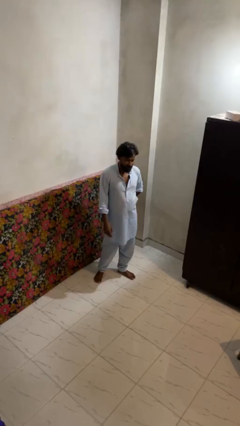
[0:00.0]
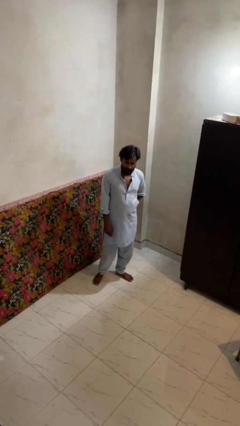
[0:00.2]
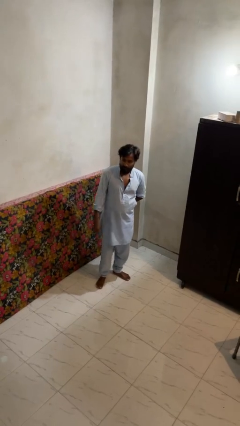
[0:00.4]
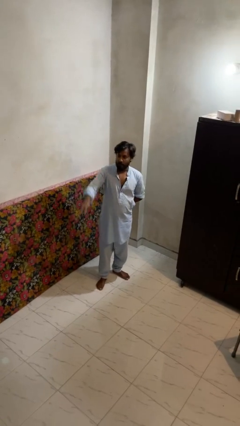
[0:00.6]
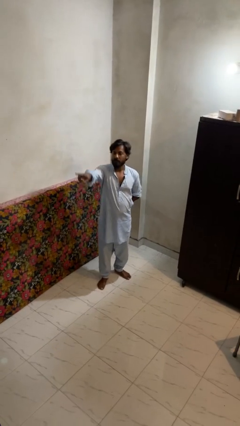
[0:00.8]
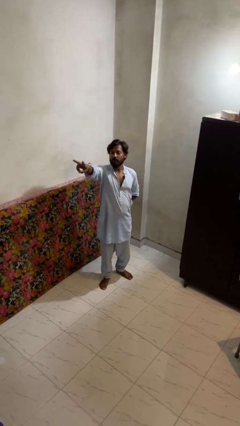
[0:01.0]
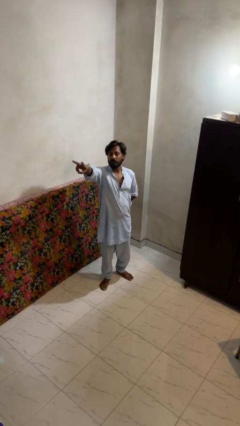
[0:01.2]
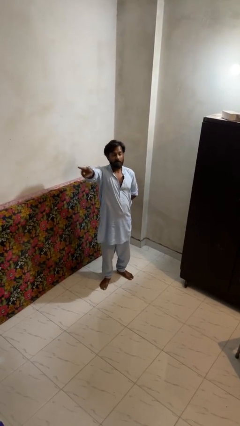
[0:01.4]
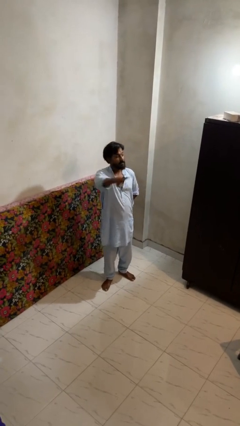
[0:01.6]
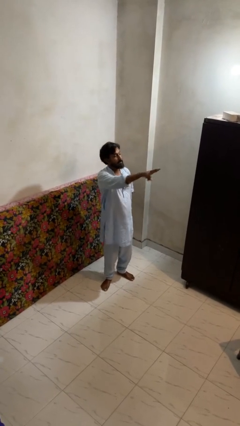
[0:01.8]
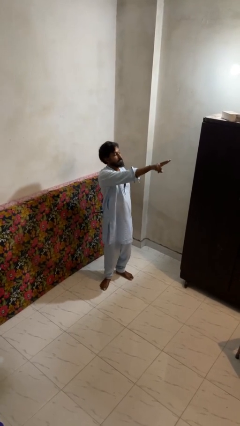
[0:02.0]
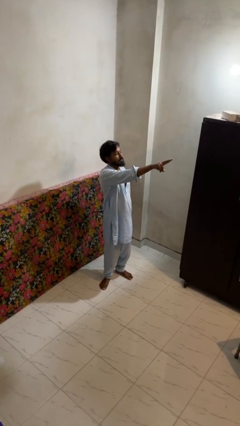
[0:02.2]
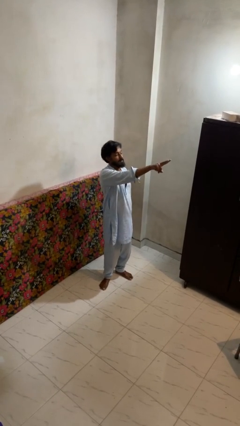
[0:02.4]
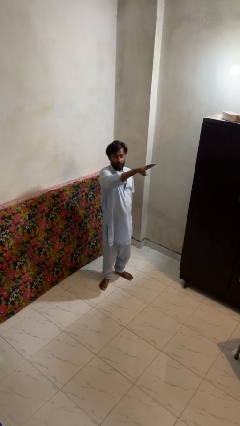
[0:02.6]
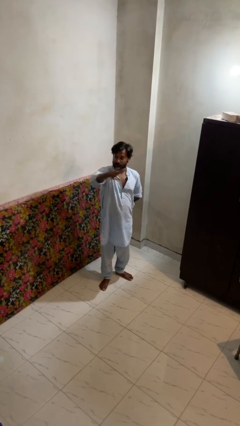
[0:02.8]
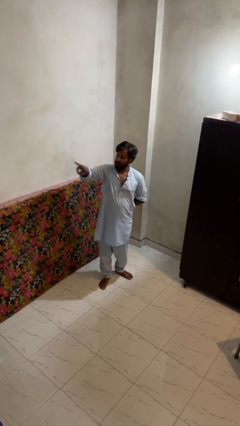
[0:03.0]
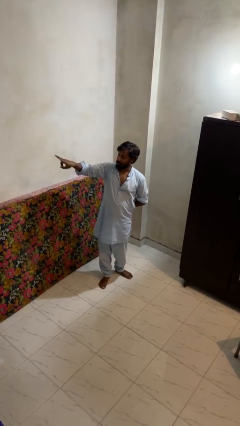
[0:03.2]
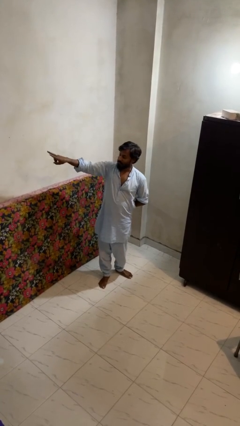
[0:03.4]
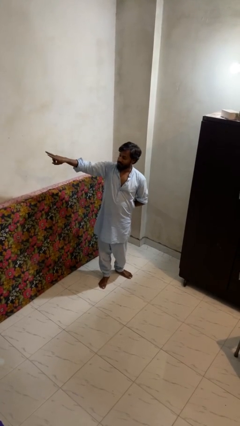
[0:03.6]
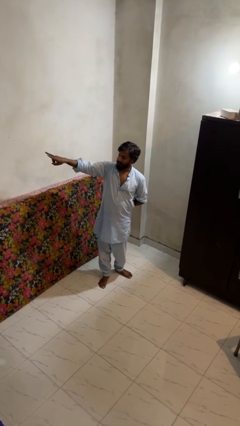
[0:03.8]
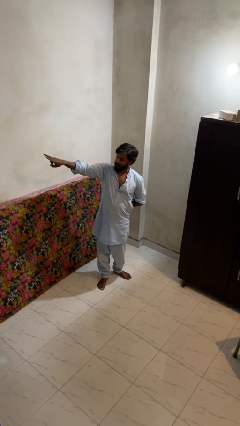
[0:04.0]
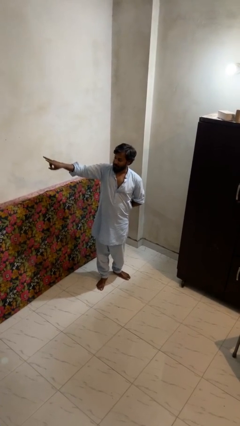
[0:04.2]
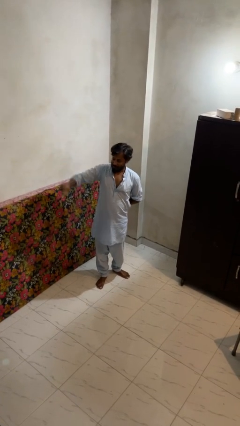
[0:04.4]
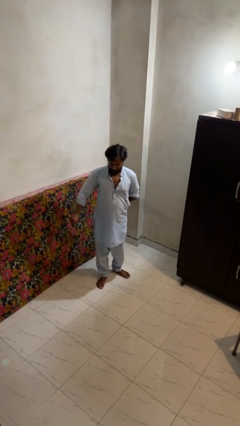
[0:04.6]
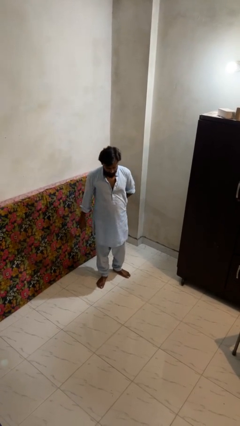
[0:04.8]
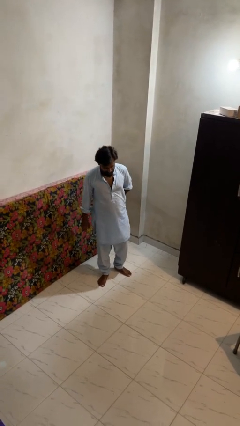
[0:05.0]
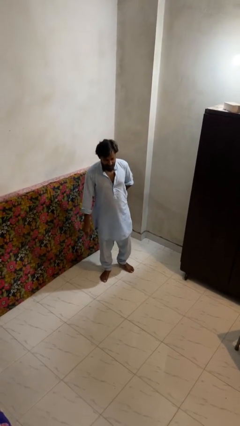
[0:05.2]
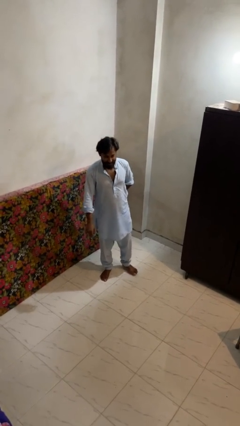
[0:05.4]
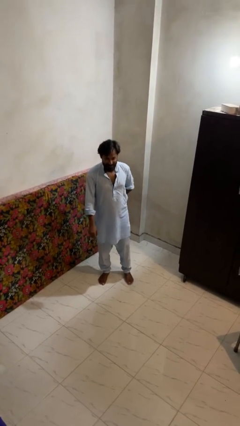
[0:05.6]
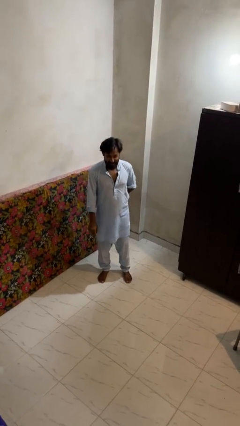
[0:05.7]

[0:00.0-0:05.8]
person gestures peace

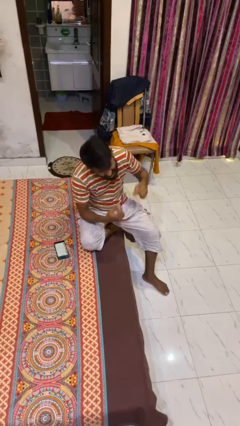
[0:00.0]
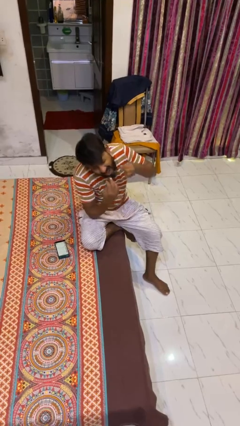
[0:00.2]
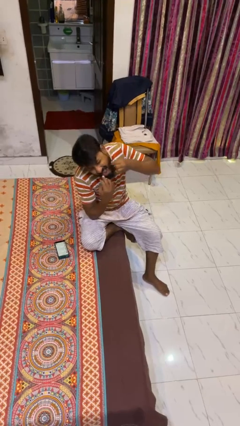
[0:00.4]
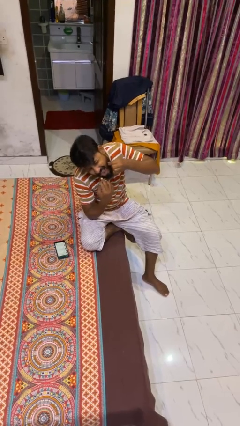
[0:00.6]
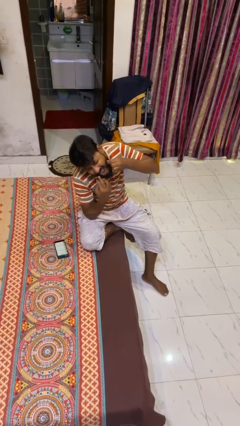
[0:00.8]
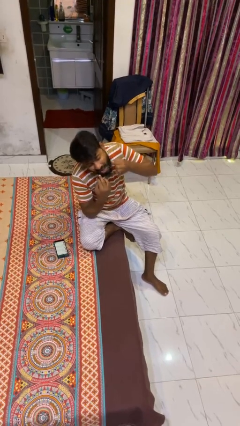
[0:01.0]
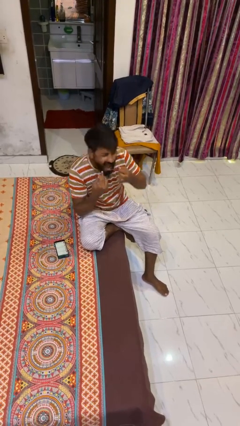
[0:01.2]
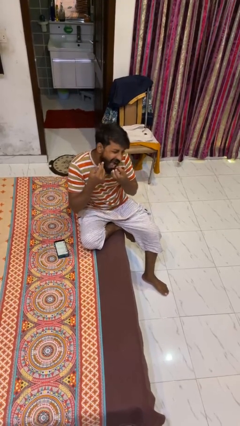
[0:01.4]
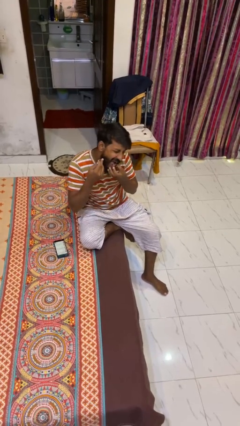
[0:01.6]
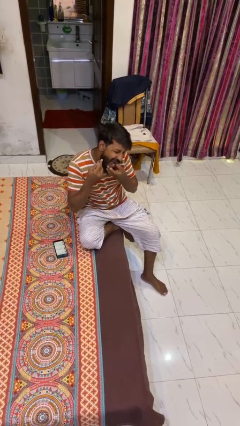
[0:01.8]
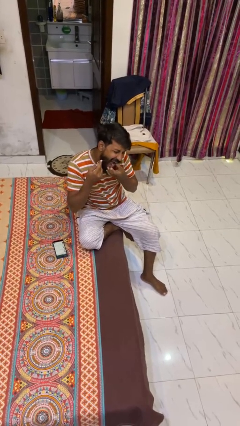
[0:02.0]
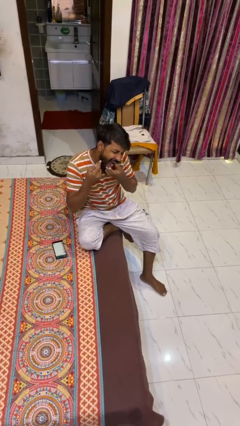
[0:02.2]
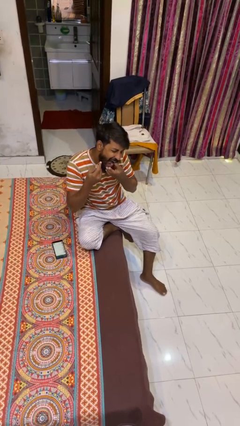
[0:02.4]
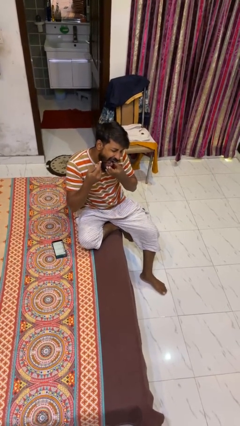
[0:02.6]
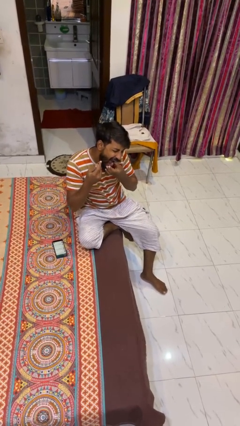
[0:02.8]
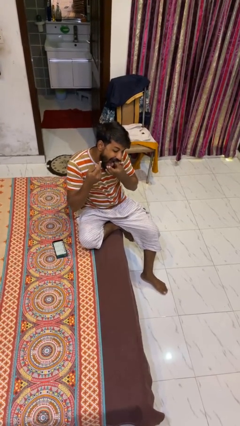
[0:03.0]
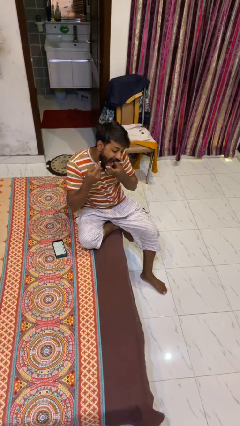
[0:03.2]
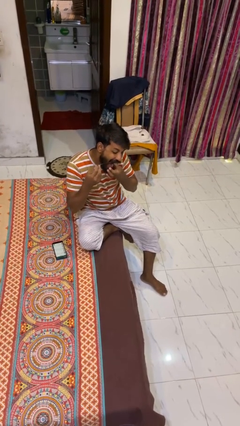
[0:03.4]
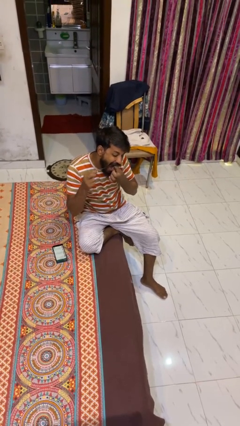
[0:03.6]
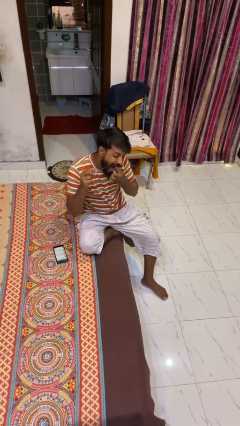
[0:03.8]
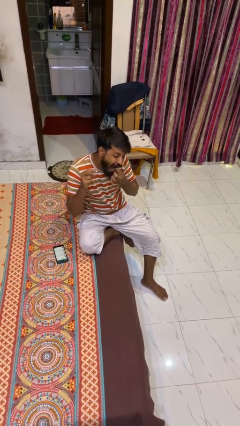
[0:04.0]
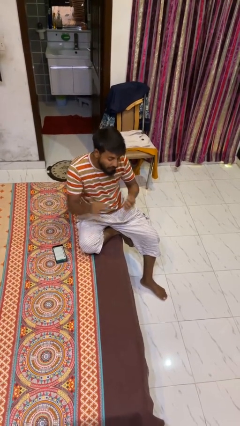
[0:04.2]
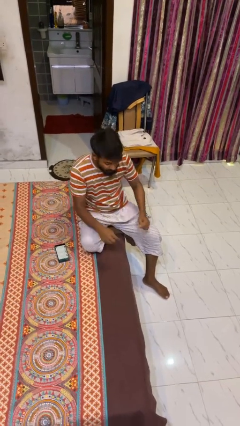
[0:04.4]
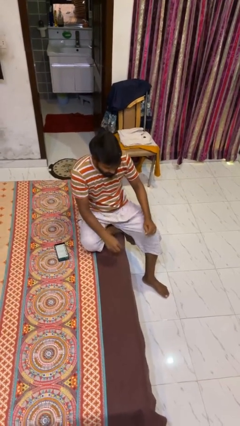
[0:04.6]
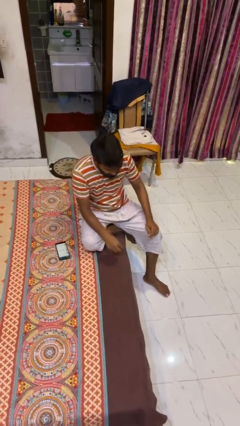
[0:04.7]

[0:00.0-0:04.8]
person flosses

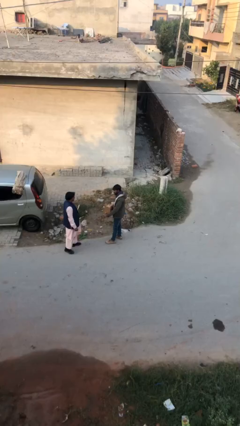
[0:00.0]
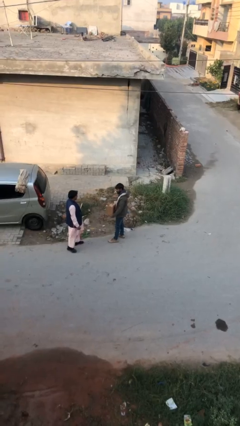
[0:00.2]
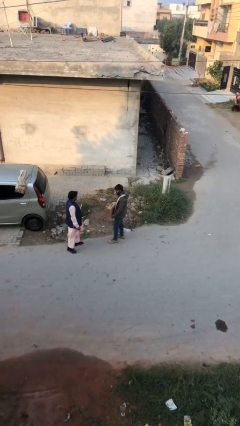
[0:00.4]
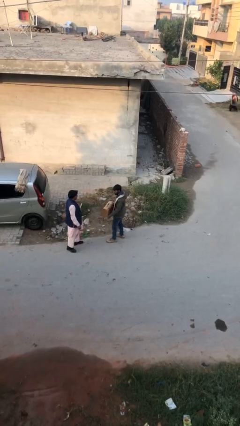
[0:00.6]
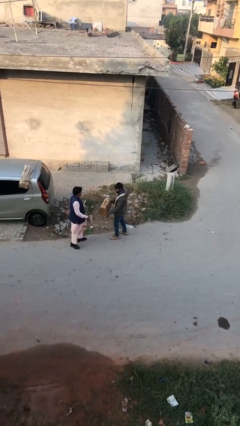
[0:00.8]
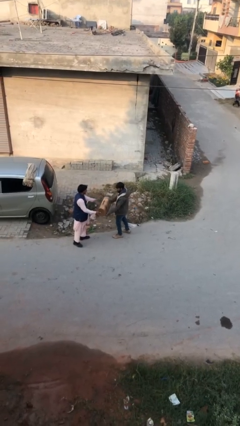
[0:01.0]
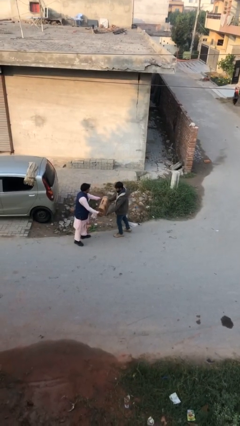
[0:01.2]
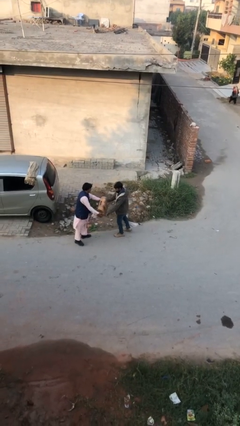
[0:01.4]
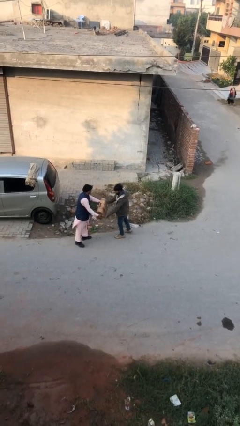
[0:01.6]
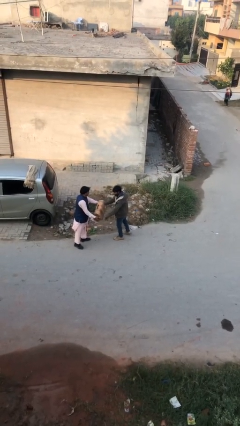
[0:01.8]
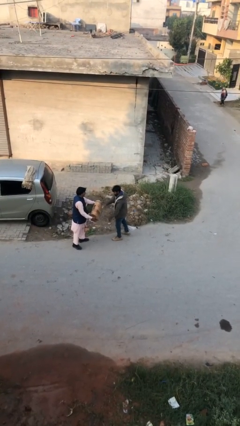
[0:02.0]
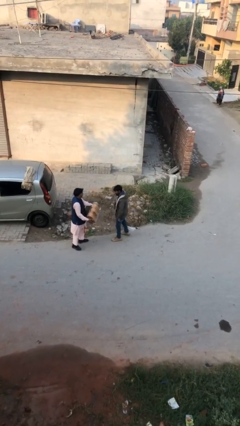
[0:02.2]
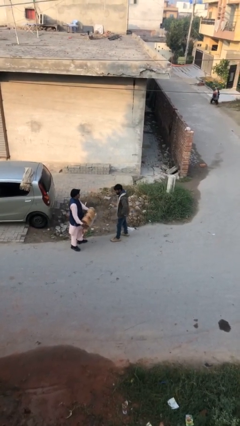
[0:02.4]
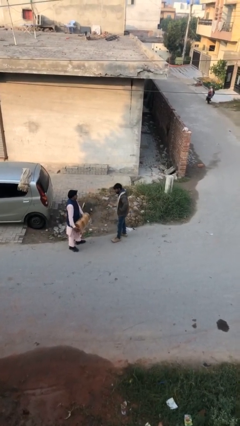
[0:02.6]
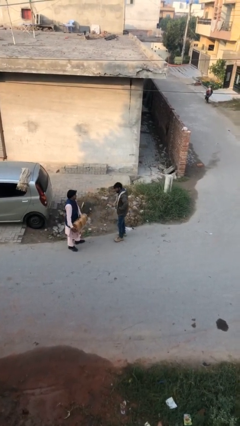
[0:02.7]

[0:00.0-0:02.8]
person transfers object to person

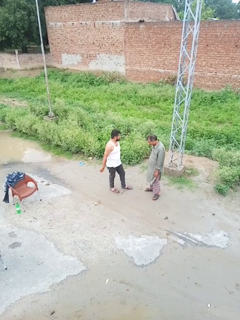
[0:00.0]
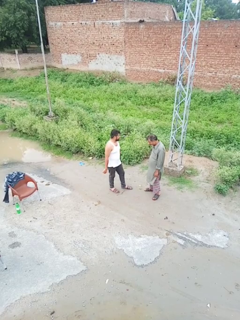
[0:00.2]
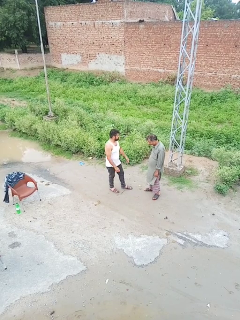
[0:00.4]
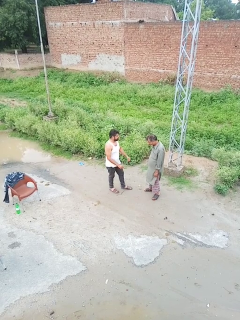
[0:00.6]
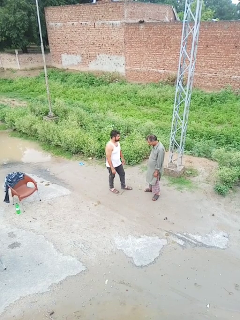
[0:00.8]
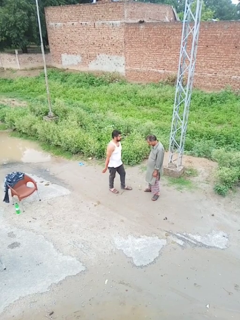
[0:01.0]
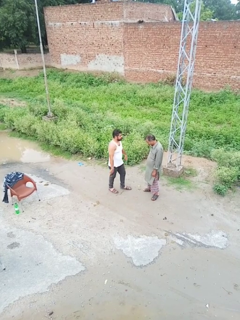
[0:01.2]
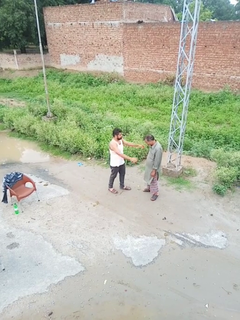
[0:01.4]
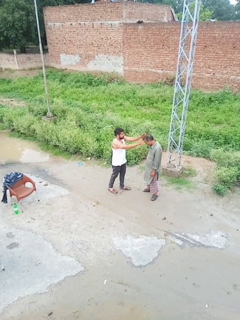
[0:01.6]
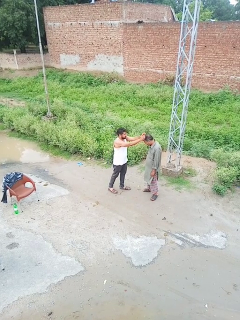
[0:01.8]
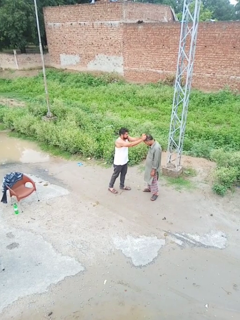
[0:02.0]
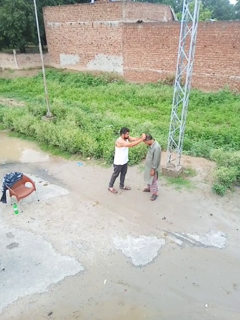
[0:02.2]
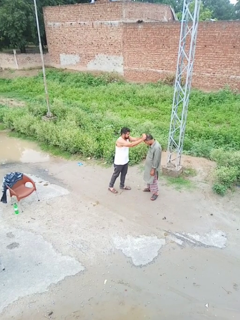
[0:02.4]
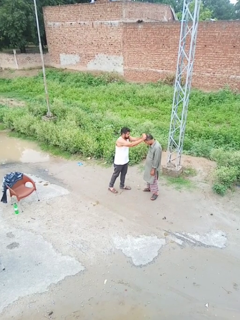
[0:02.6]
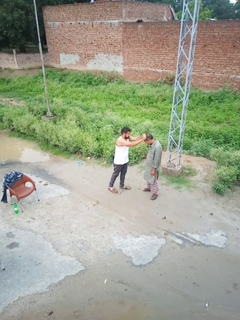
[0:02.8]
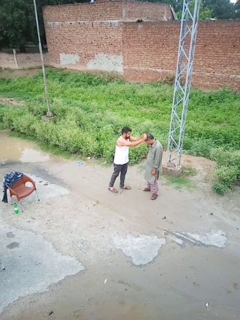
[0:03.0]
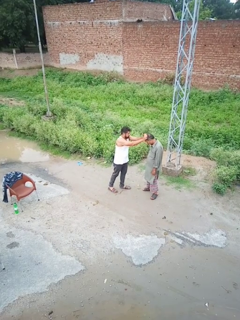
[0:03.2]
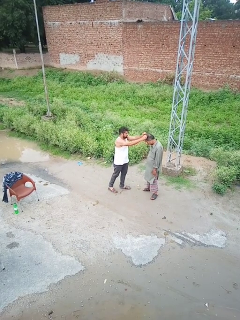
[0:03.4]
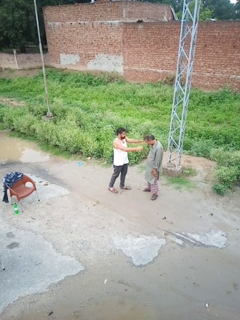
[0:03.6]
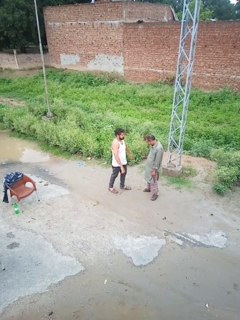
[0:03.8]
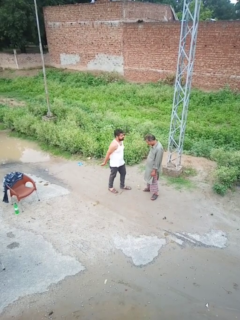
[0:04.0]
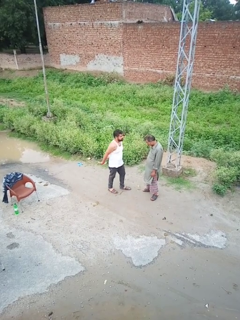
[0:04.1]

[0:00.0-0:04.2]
person grabs person by hair

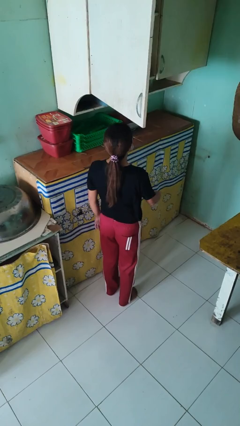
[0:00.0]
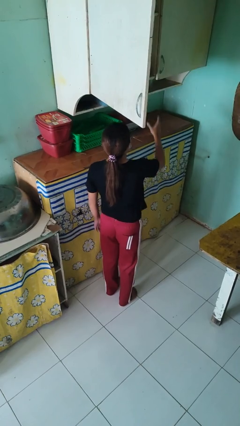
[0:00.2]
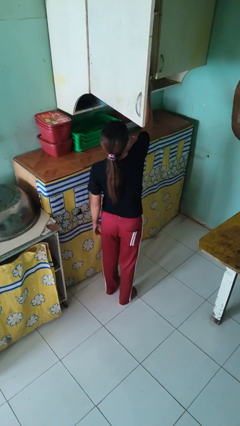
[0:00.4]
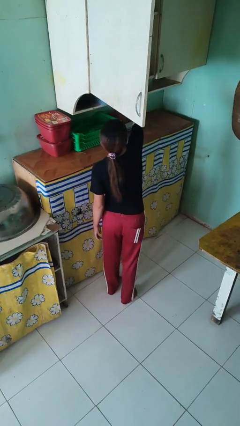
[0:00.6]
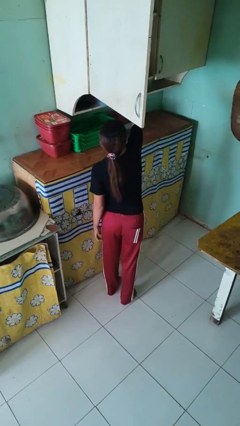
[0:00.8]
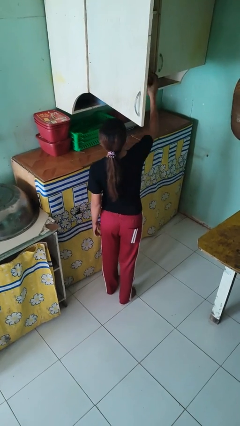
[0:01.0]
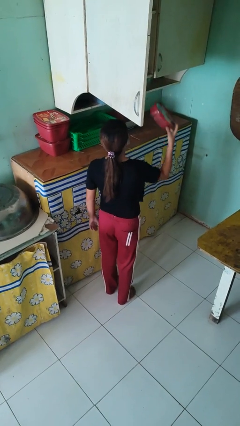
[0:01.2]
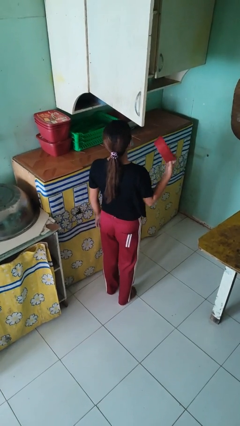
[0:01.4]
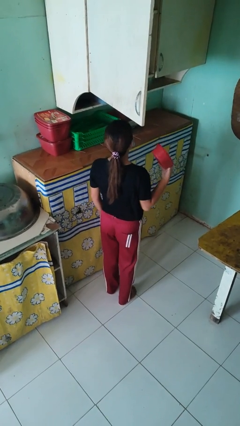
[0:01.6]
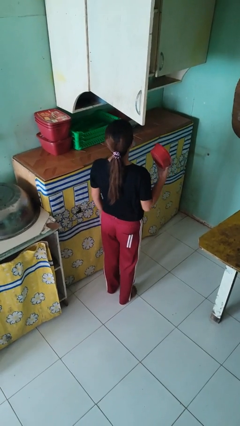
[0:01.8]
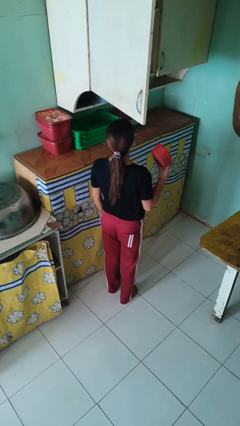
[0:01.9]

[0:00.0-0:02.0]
person takes object from cabinet
